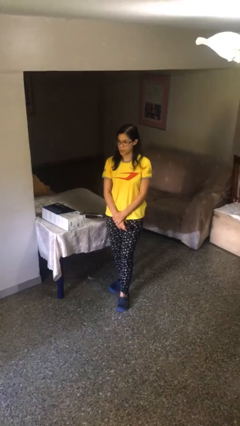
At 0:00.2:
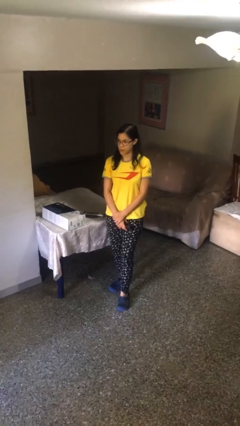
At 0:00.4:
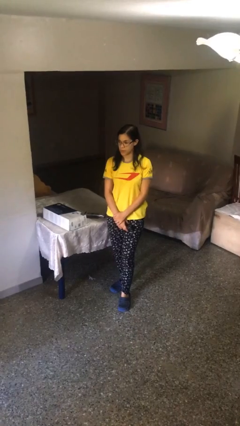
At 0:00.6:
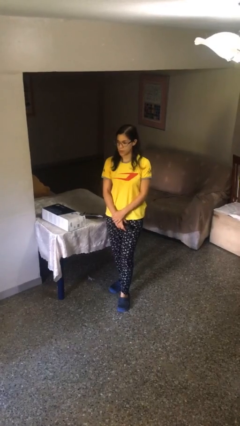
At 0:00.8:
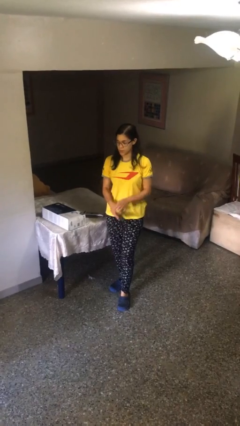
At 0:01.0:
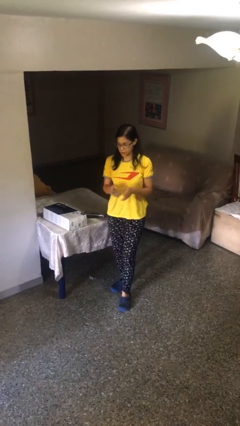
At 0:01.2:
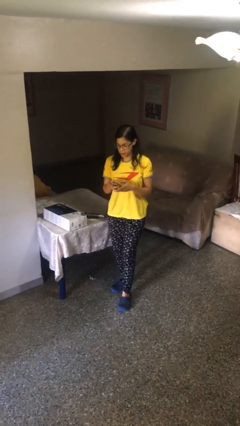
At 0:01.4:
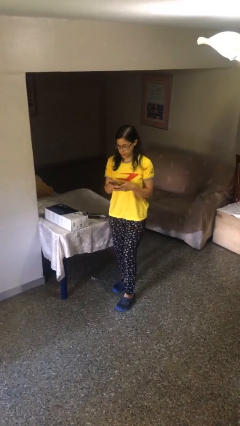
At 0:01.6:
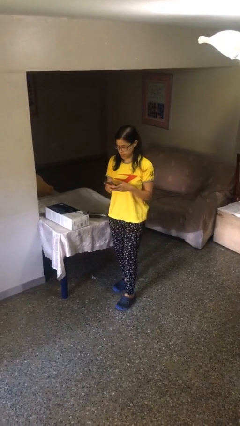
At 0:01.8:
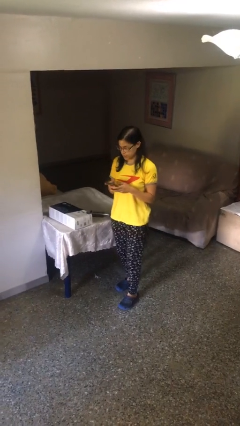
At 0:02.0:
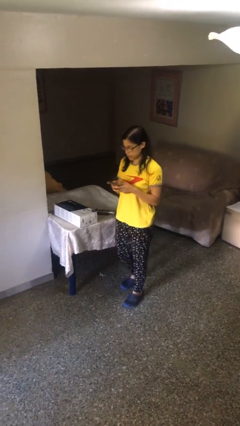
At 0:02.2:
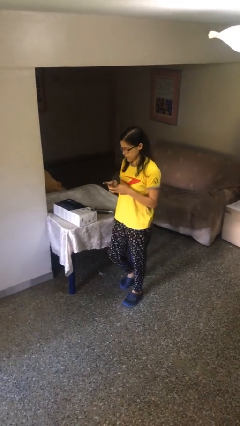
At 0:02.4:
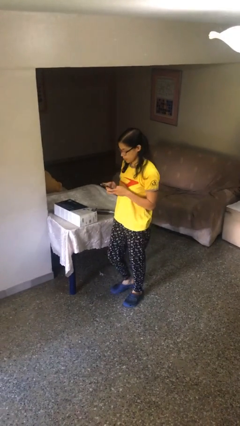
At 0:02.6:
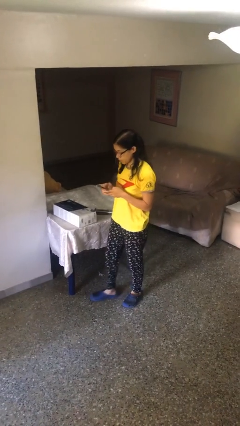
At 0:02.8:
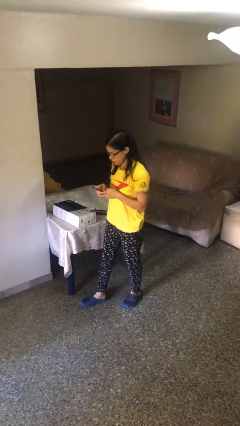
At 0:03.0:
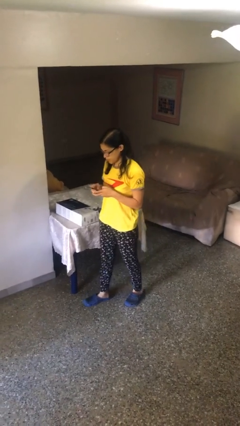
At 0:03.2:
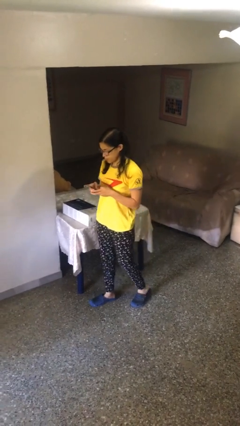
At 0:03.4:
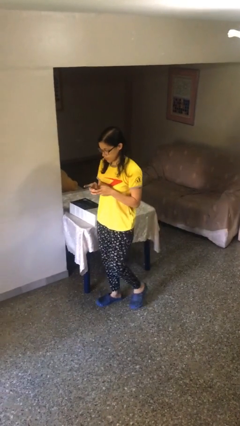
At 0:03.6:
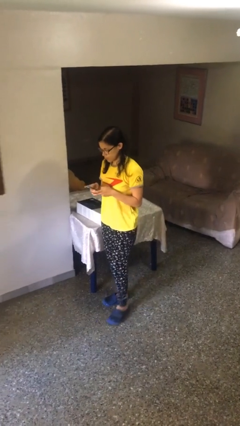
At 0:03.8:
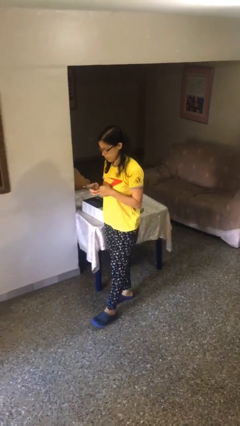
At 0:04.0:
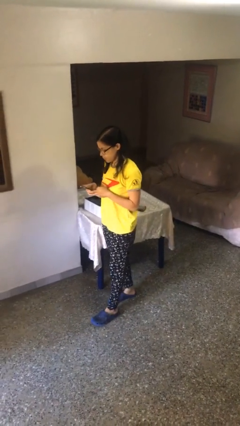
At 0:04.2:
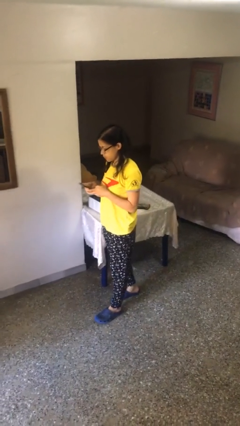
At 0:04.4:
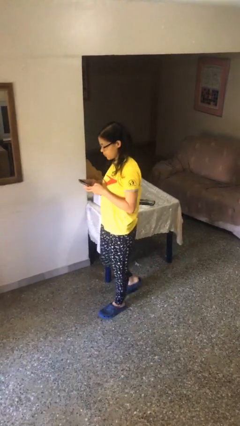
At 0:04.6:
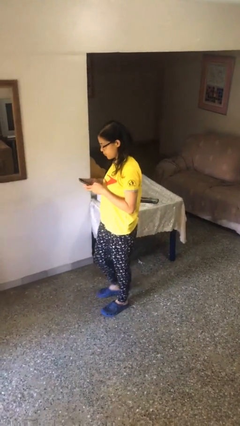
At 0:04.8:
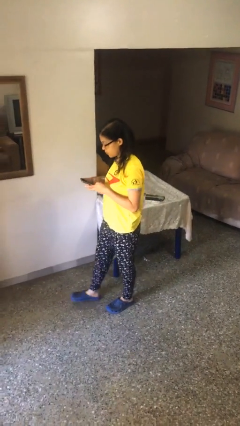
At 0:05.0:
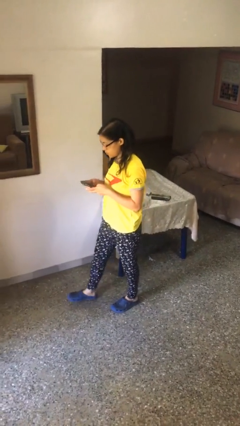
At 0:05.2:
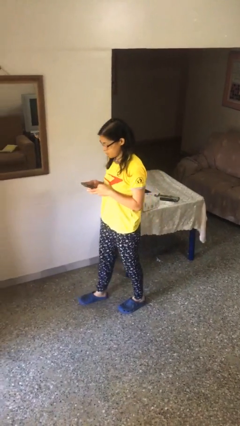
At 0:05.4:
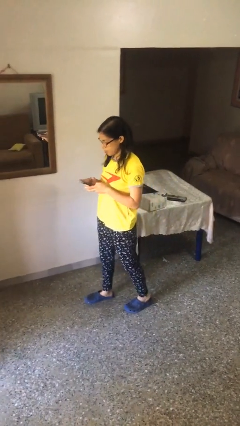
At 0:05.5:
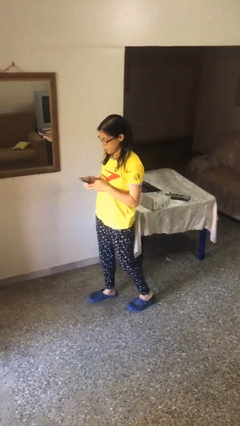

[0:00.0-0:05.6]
person texts on phone

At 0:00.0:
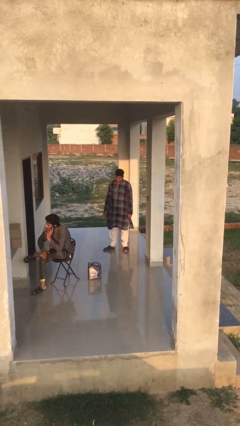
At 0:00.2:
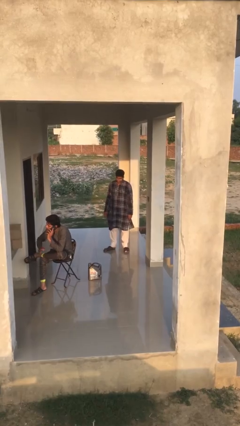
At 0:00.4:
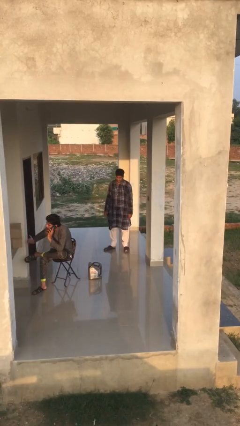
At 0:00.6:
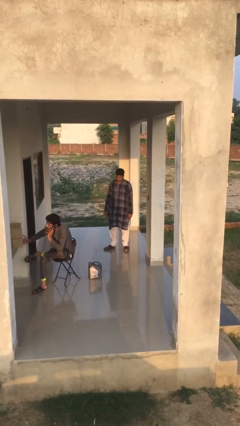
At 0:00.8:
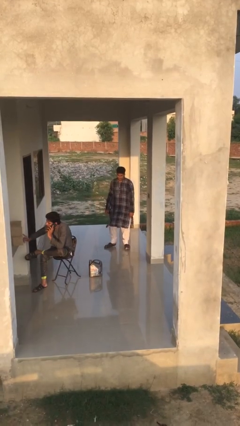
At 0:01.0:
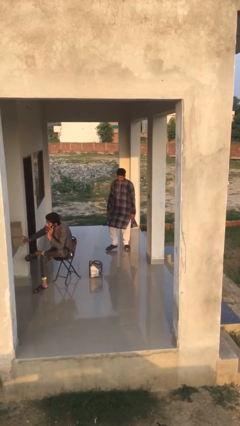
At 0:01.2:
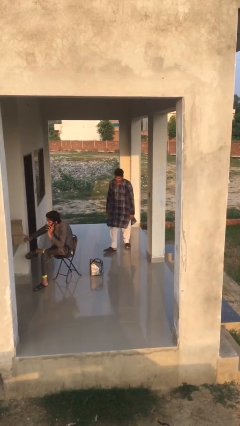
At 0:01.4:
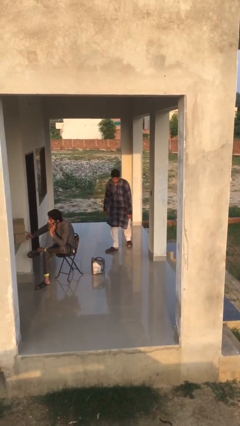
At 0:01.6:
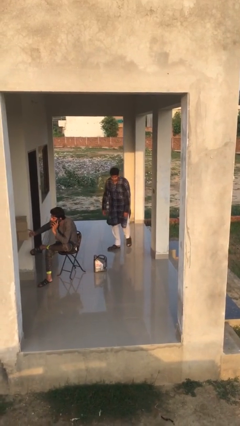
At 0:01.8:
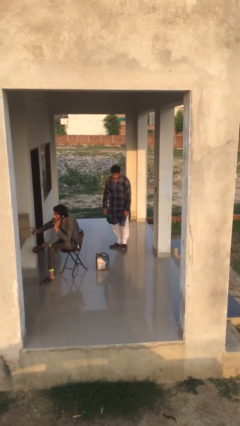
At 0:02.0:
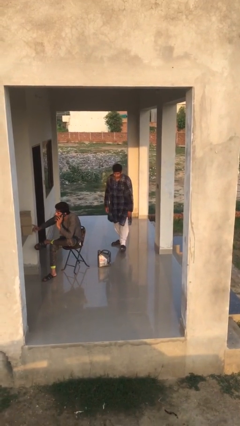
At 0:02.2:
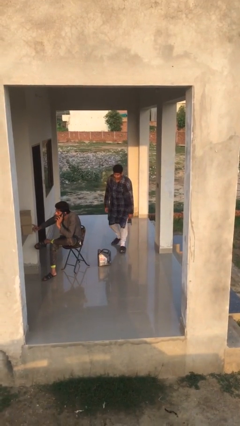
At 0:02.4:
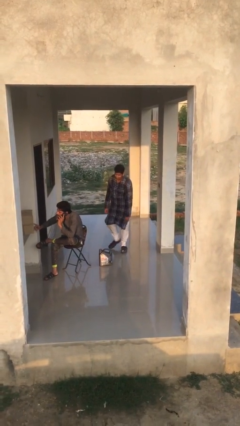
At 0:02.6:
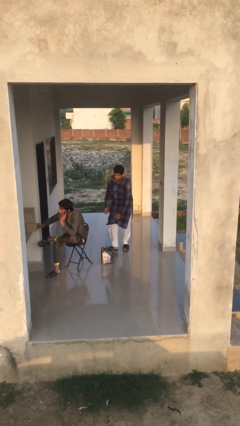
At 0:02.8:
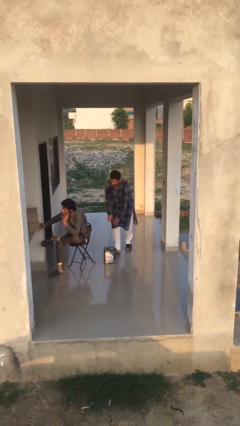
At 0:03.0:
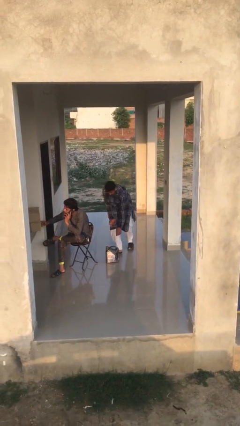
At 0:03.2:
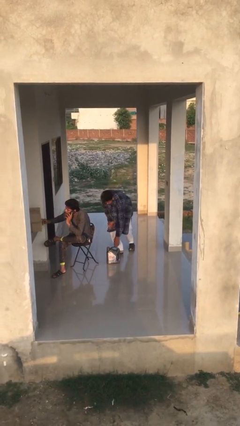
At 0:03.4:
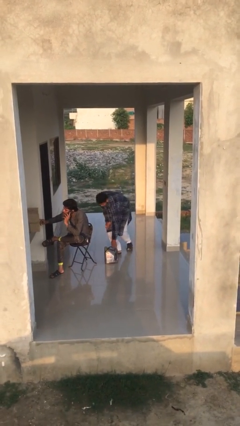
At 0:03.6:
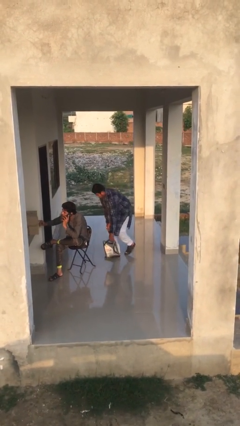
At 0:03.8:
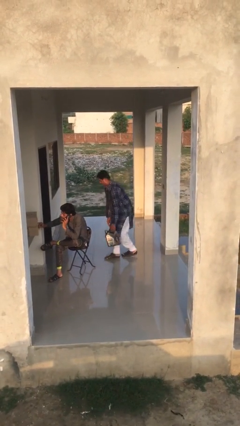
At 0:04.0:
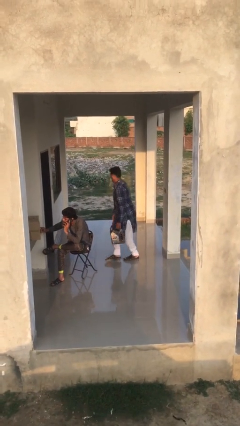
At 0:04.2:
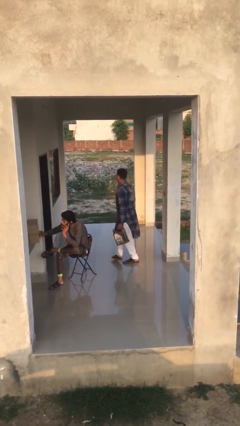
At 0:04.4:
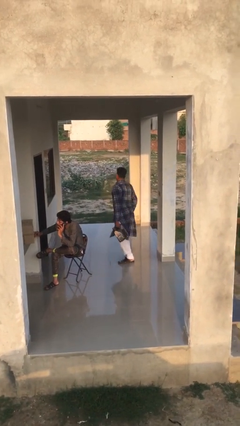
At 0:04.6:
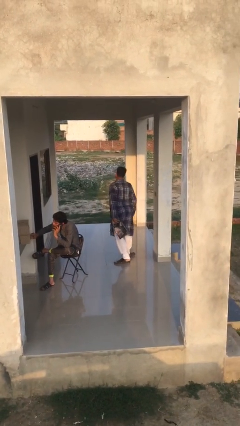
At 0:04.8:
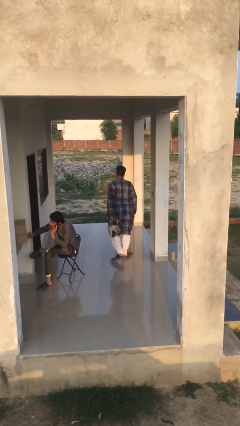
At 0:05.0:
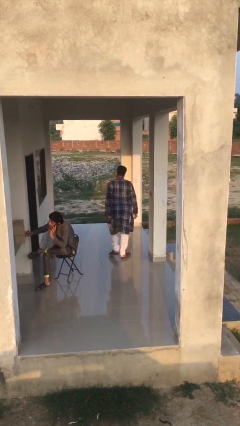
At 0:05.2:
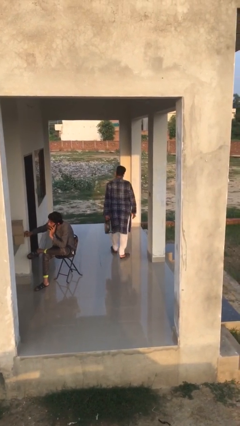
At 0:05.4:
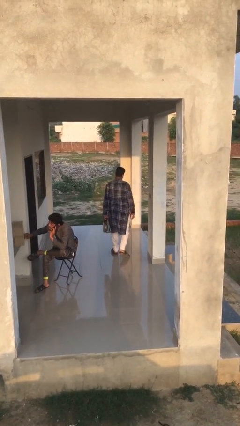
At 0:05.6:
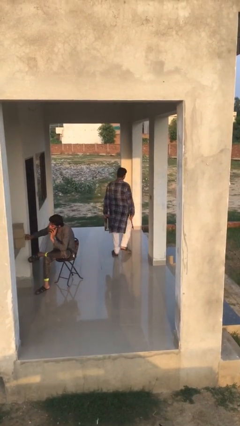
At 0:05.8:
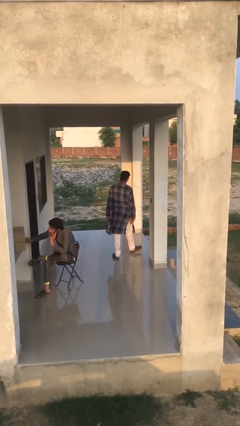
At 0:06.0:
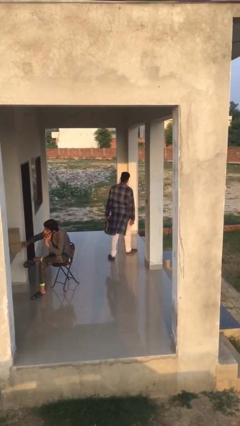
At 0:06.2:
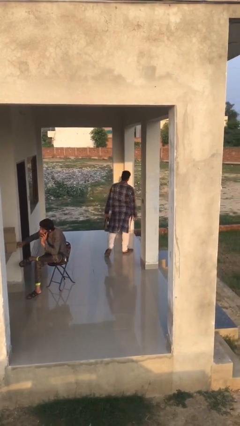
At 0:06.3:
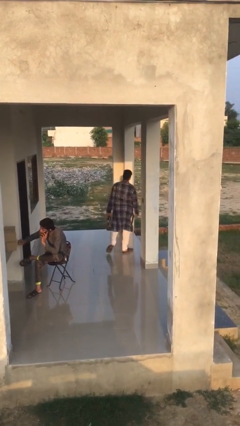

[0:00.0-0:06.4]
person steals object from person

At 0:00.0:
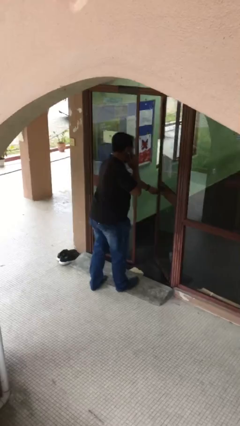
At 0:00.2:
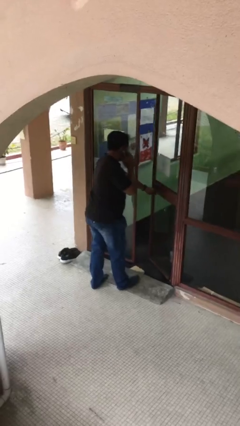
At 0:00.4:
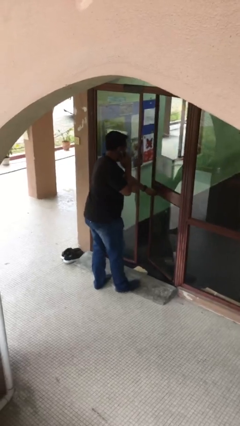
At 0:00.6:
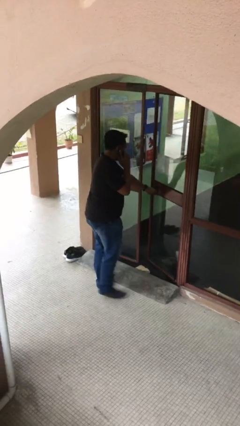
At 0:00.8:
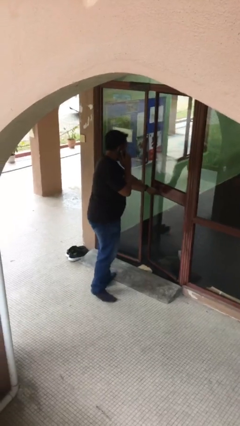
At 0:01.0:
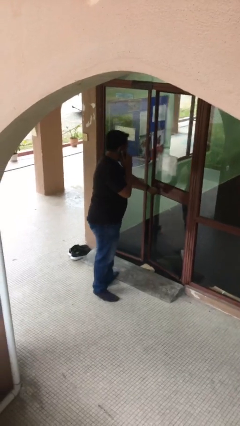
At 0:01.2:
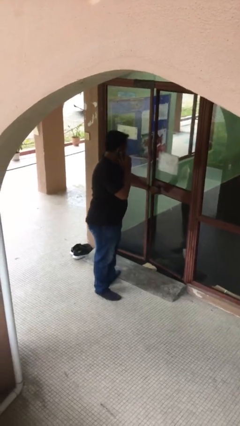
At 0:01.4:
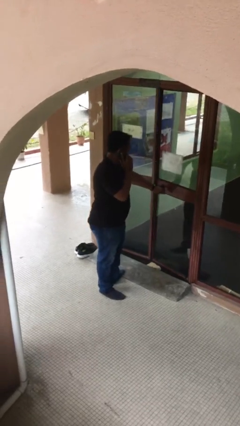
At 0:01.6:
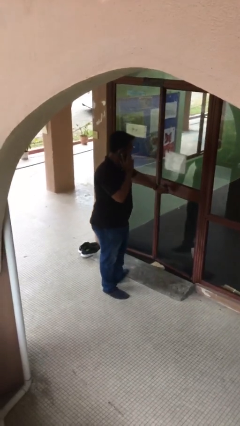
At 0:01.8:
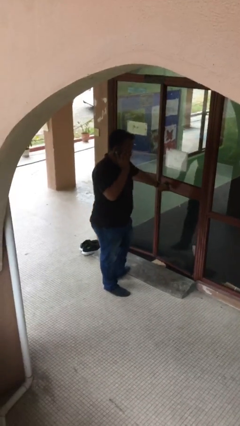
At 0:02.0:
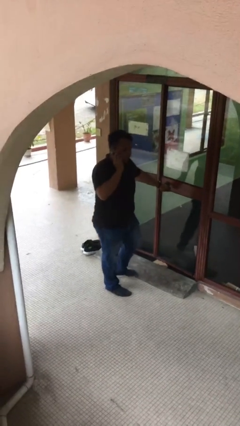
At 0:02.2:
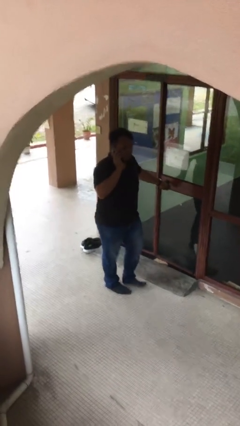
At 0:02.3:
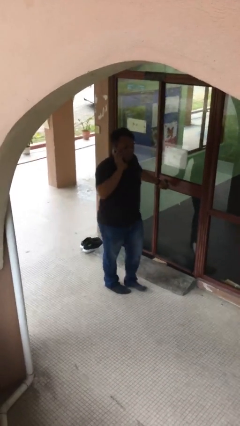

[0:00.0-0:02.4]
person closes facility door

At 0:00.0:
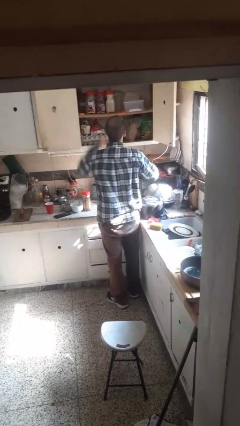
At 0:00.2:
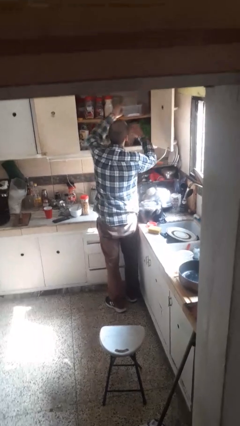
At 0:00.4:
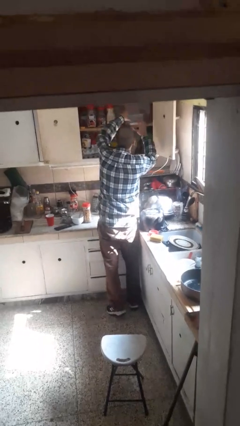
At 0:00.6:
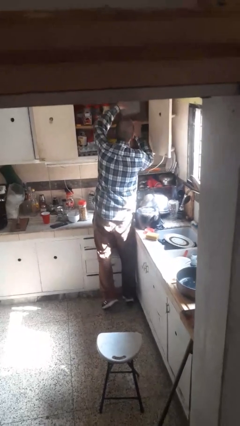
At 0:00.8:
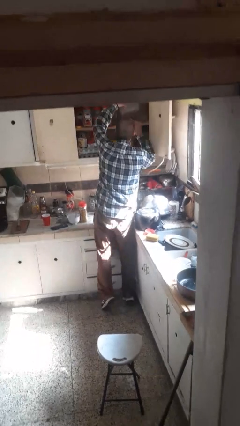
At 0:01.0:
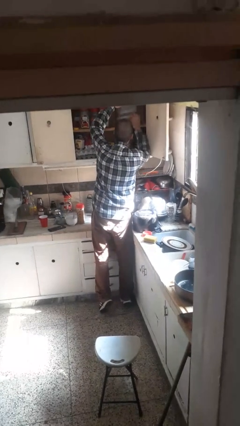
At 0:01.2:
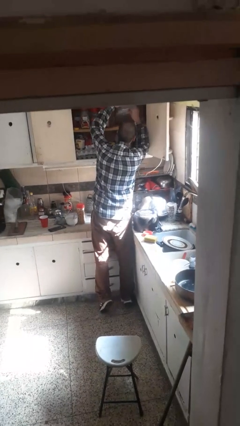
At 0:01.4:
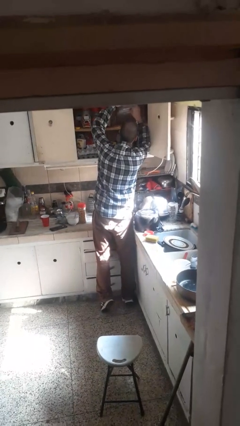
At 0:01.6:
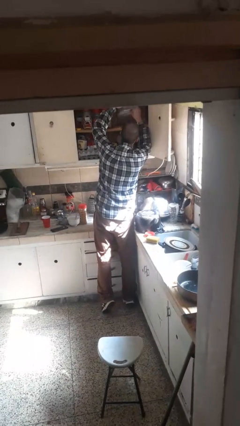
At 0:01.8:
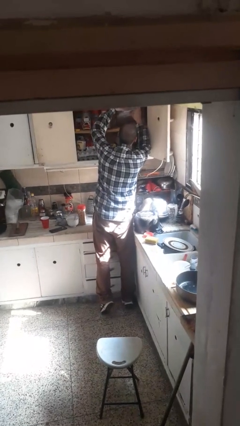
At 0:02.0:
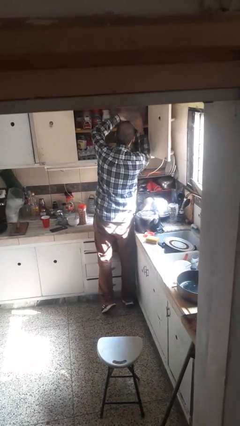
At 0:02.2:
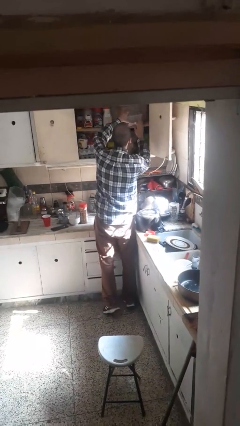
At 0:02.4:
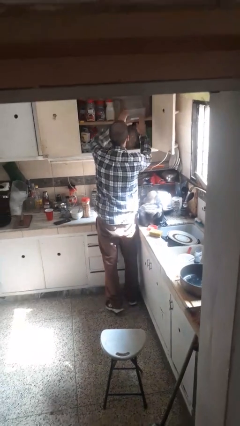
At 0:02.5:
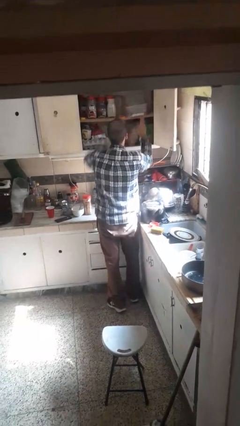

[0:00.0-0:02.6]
person searches in cabinet

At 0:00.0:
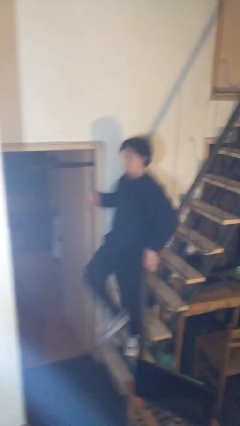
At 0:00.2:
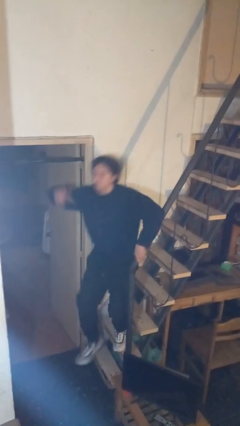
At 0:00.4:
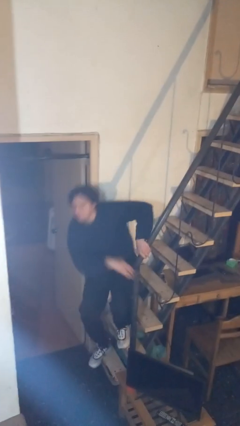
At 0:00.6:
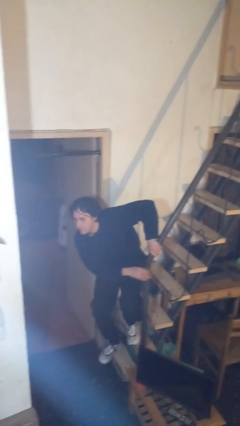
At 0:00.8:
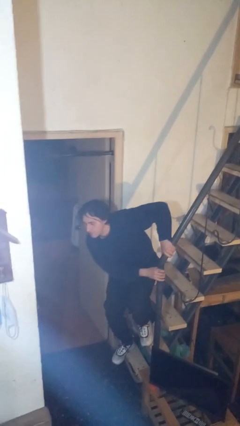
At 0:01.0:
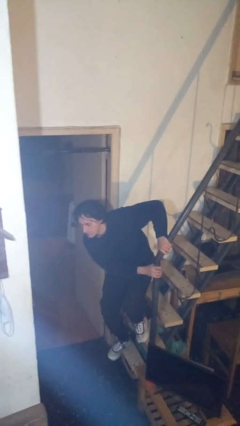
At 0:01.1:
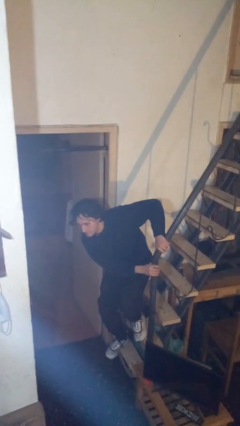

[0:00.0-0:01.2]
person trips on stair
